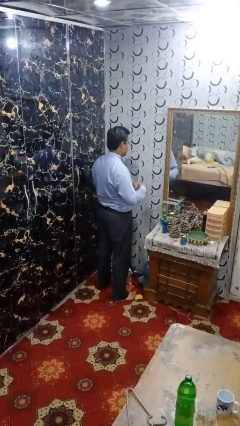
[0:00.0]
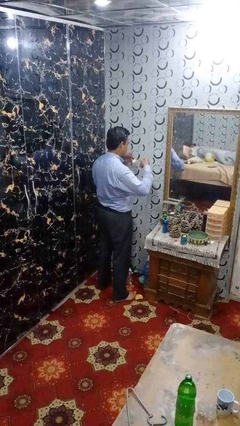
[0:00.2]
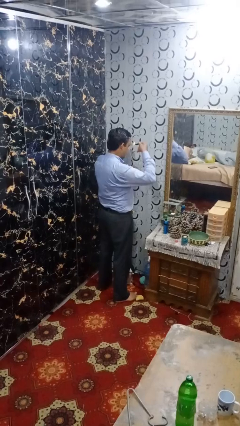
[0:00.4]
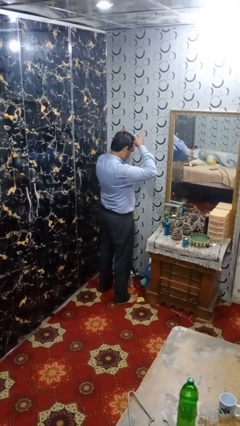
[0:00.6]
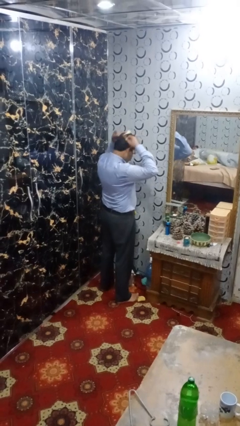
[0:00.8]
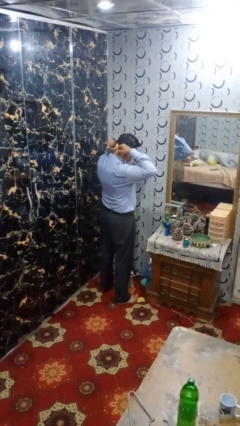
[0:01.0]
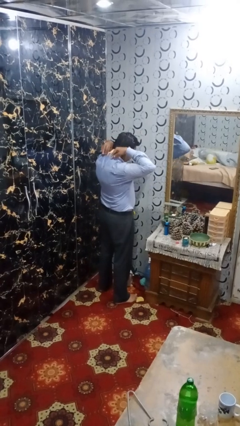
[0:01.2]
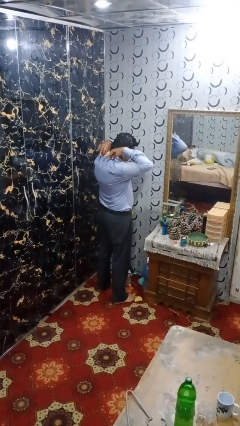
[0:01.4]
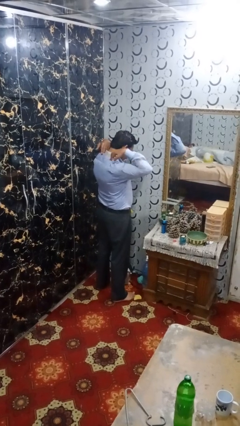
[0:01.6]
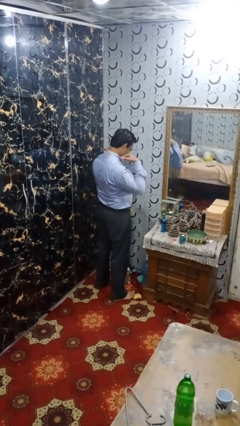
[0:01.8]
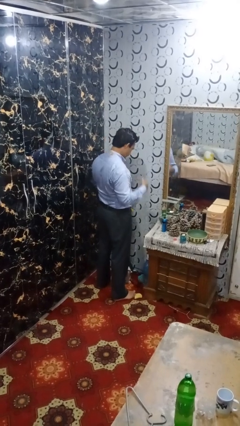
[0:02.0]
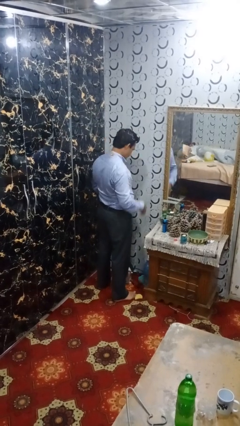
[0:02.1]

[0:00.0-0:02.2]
person puts on necklace

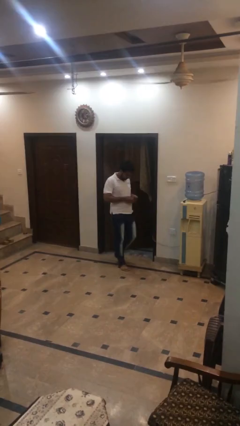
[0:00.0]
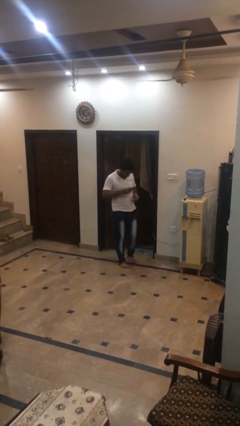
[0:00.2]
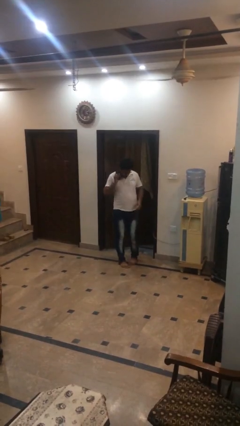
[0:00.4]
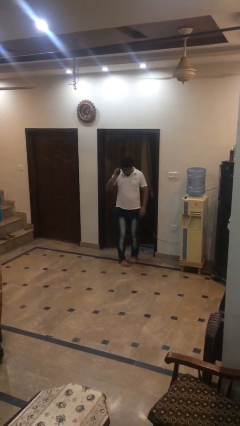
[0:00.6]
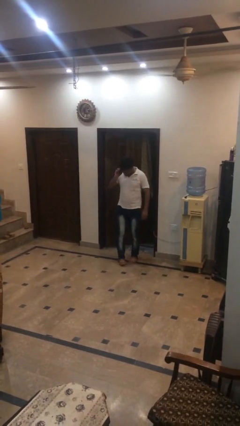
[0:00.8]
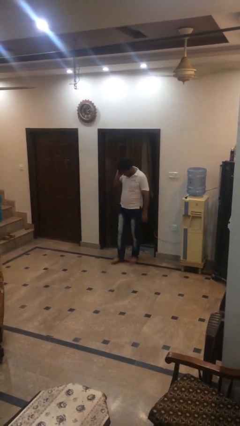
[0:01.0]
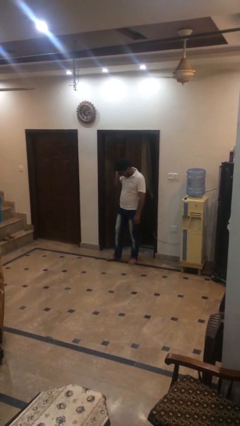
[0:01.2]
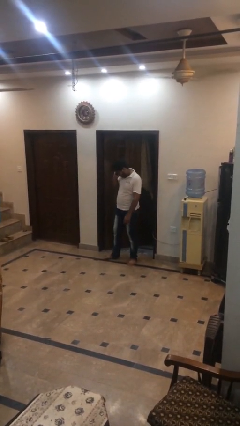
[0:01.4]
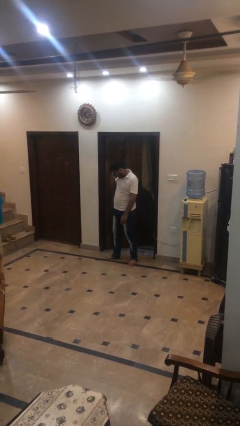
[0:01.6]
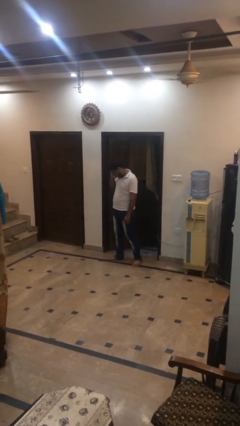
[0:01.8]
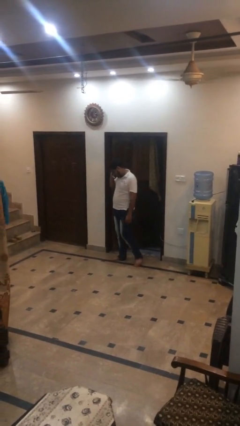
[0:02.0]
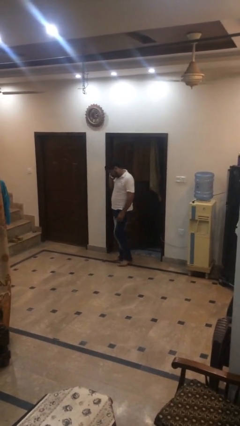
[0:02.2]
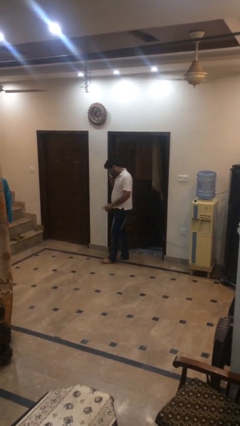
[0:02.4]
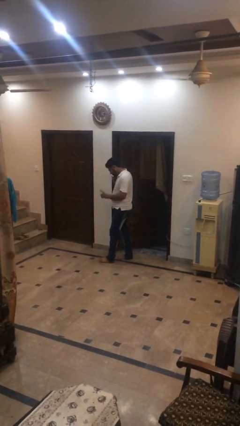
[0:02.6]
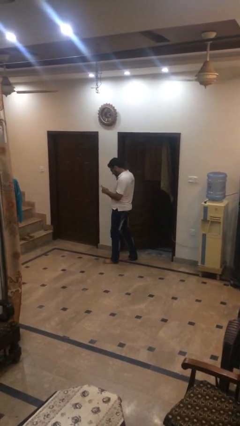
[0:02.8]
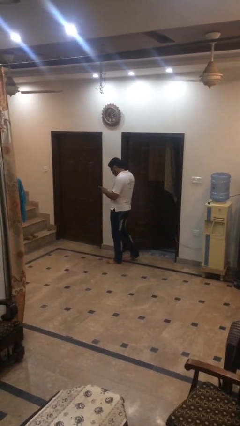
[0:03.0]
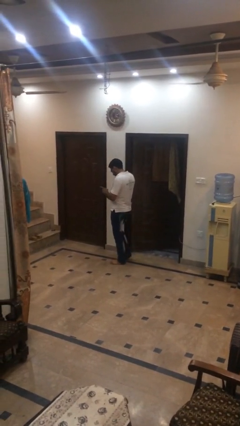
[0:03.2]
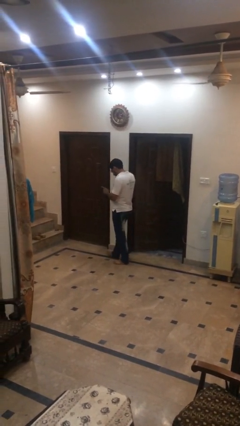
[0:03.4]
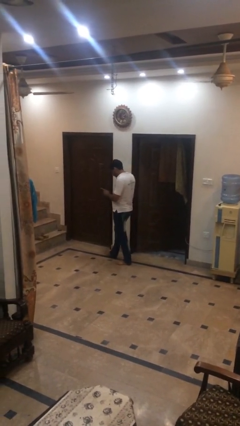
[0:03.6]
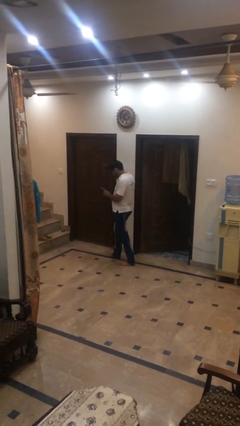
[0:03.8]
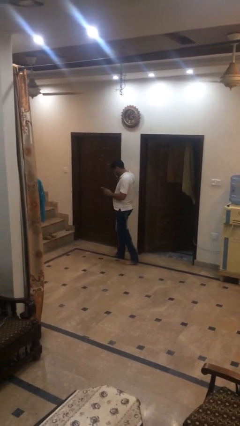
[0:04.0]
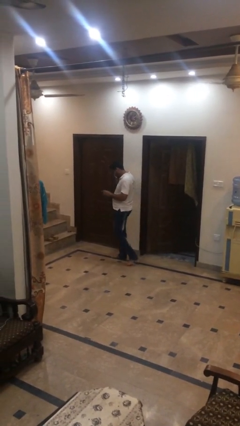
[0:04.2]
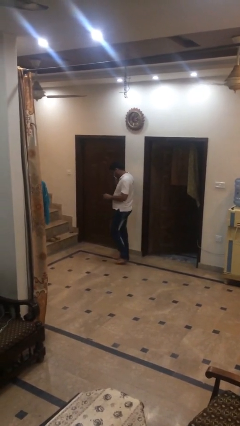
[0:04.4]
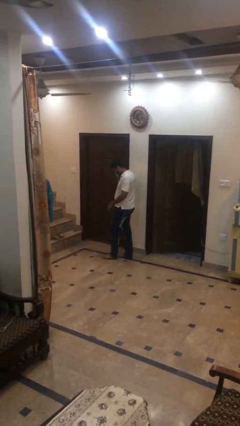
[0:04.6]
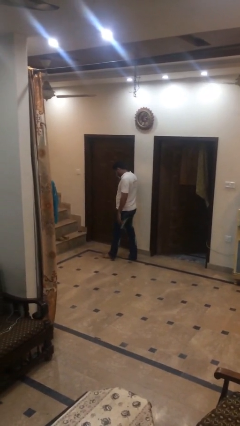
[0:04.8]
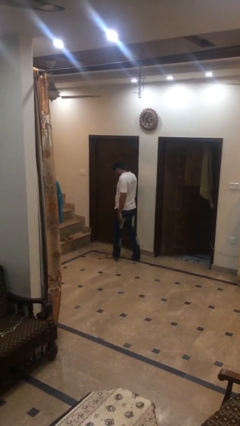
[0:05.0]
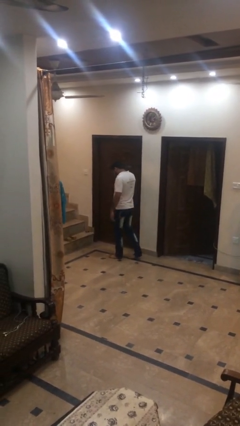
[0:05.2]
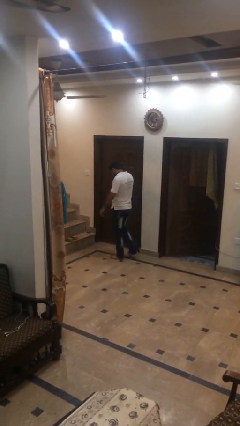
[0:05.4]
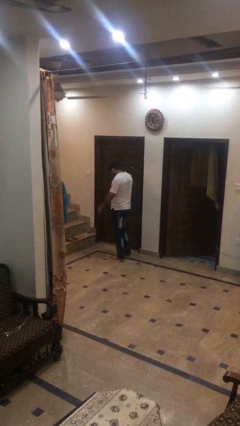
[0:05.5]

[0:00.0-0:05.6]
person talks on phone

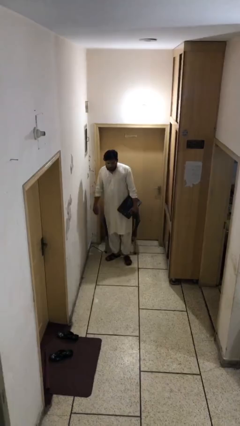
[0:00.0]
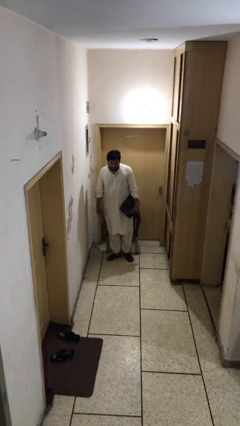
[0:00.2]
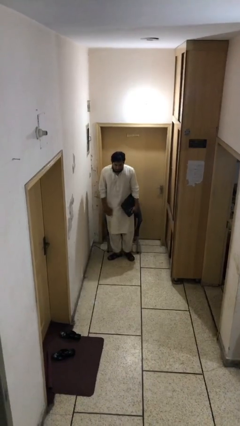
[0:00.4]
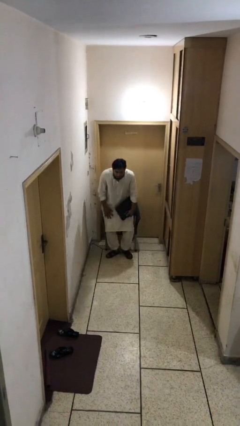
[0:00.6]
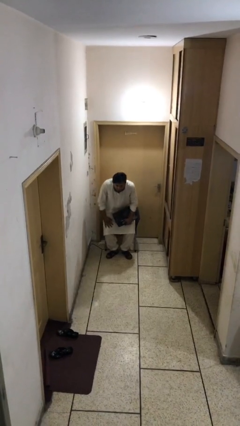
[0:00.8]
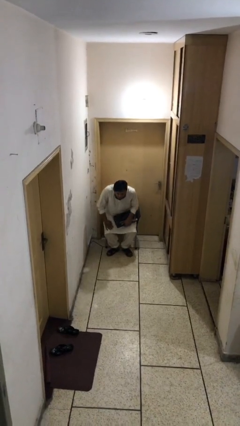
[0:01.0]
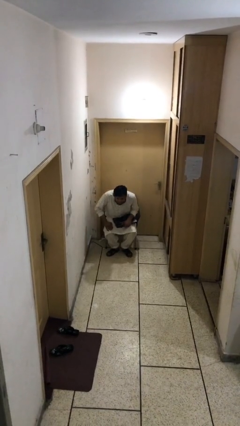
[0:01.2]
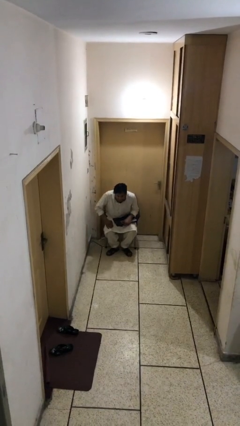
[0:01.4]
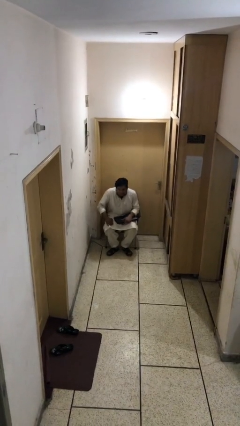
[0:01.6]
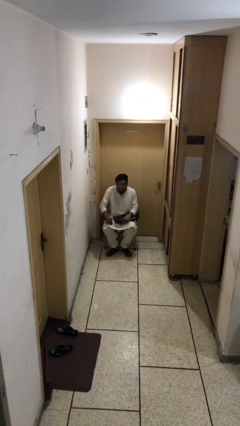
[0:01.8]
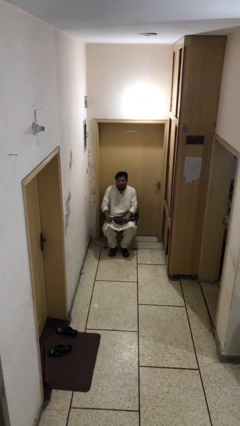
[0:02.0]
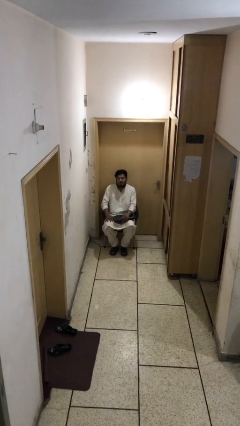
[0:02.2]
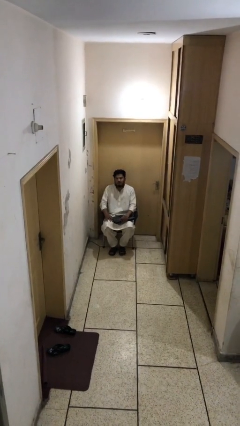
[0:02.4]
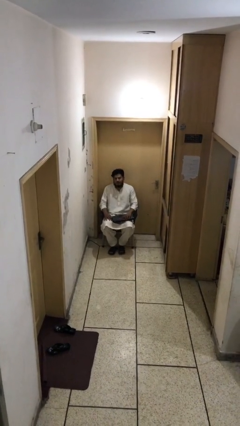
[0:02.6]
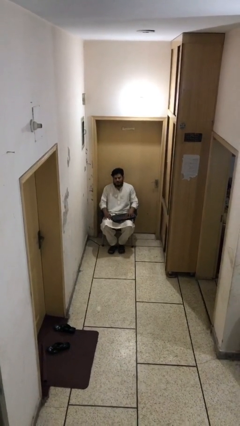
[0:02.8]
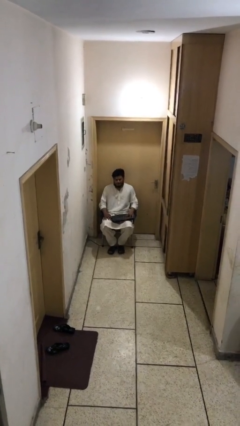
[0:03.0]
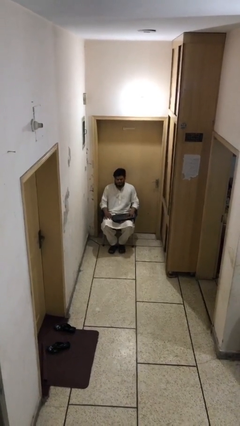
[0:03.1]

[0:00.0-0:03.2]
person sits down

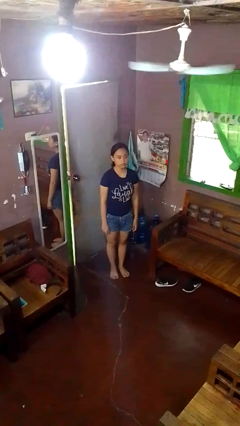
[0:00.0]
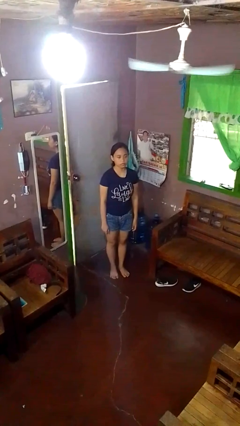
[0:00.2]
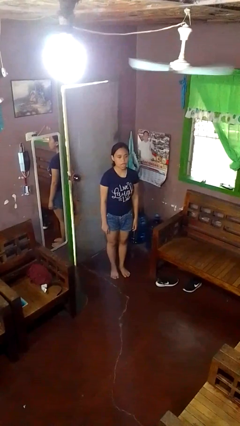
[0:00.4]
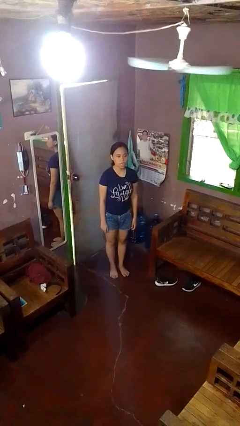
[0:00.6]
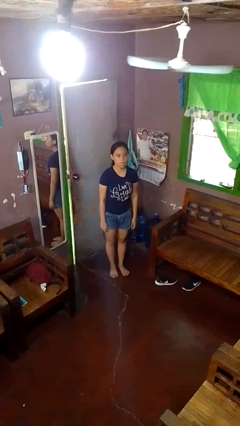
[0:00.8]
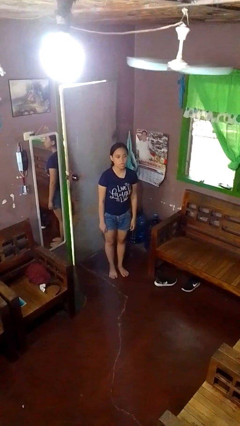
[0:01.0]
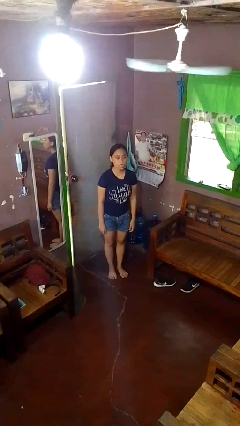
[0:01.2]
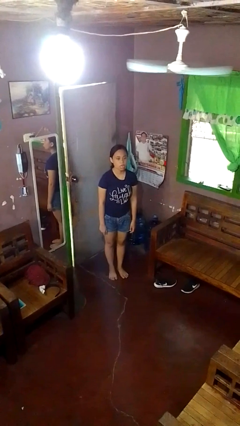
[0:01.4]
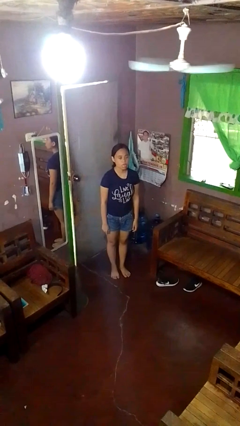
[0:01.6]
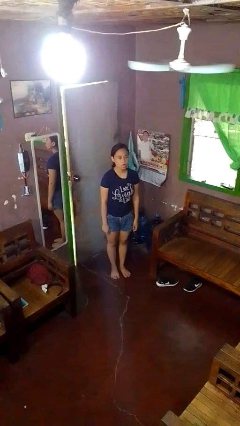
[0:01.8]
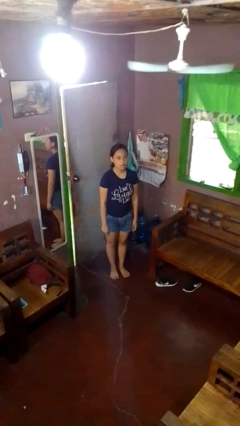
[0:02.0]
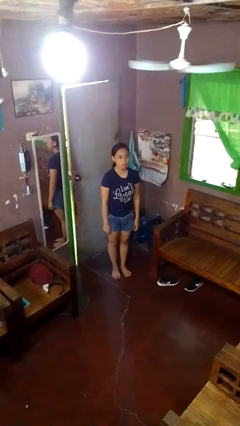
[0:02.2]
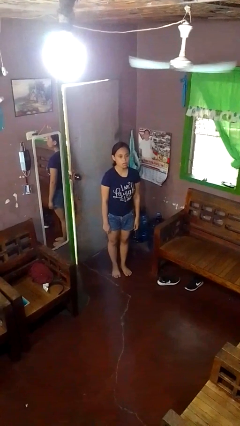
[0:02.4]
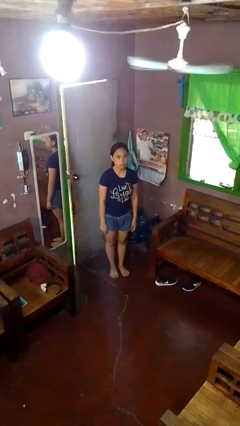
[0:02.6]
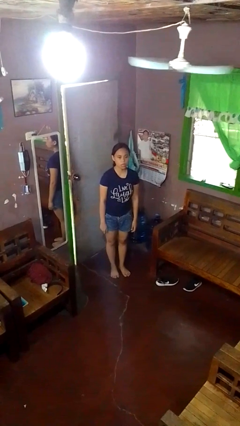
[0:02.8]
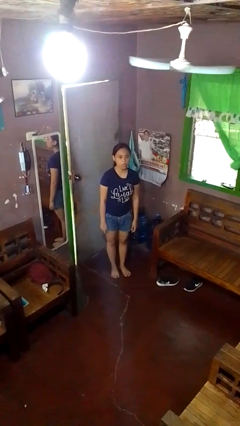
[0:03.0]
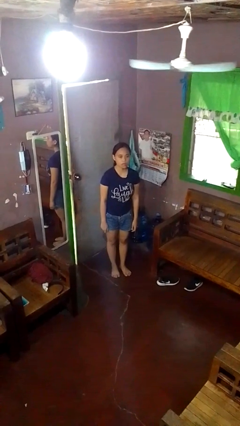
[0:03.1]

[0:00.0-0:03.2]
person sticks out tongue

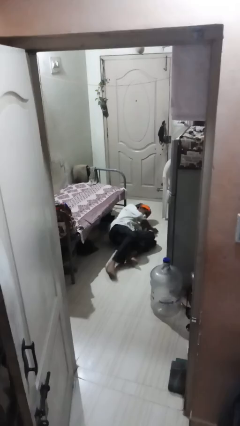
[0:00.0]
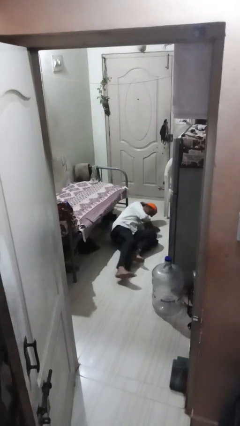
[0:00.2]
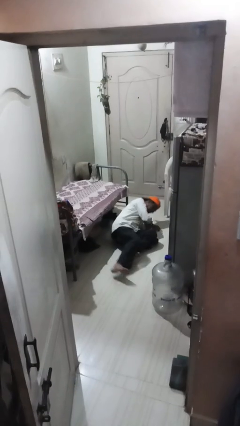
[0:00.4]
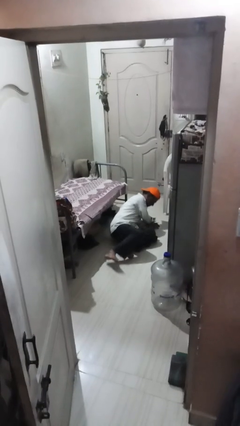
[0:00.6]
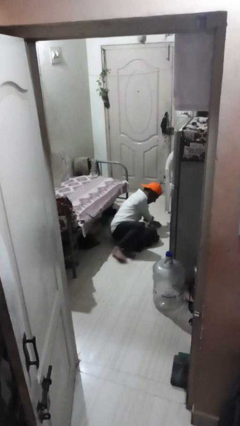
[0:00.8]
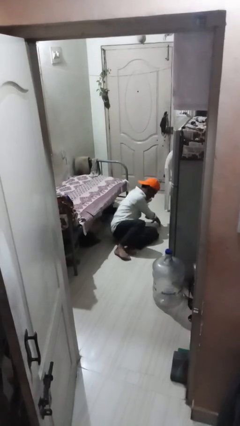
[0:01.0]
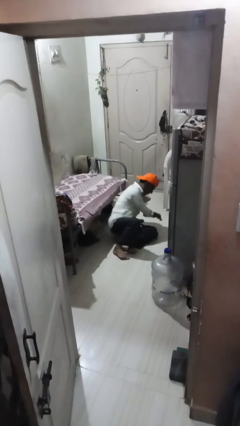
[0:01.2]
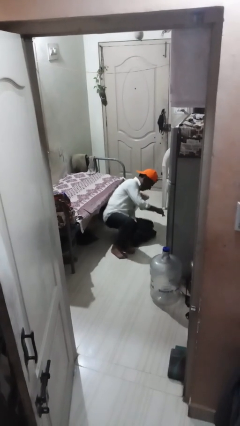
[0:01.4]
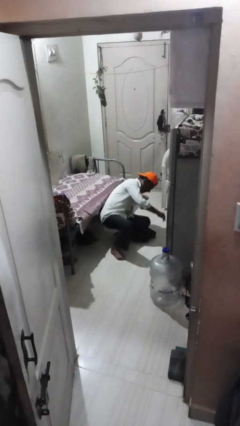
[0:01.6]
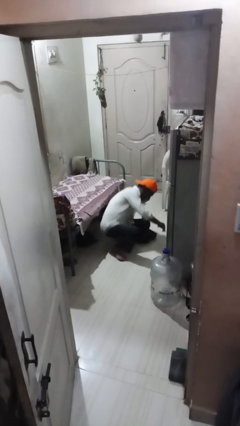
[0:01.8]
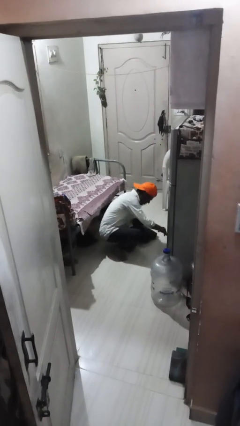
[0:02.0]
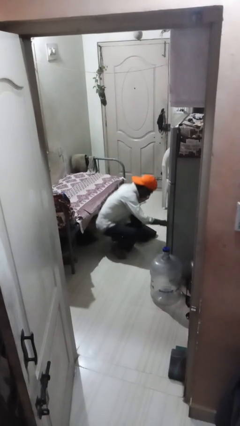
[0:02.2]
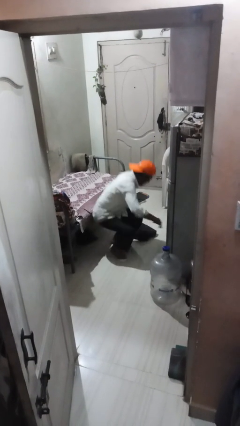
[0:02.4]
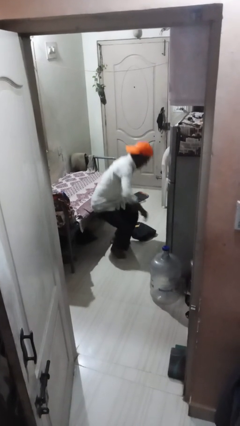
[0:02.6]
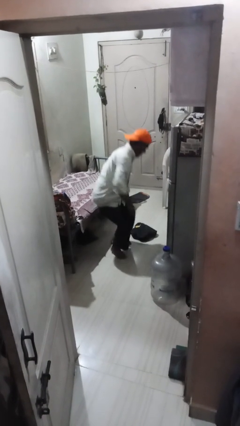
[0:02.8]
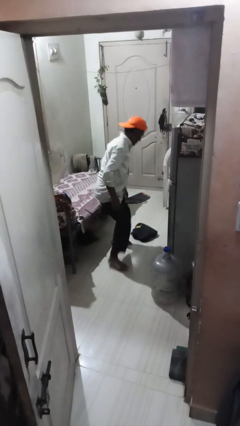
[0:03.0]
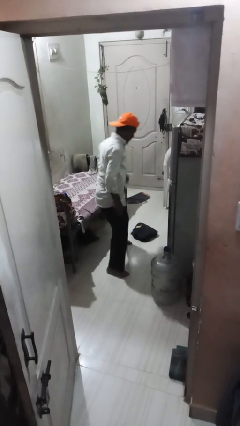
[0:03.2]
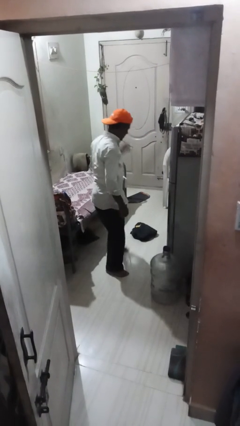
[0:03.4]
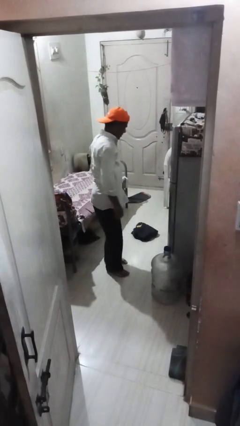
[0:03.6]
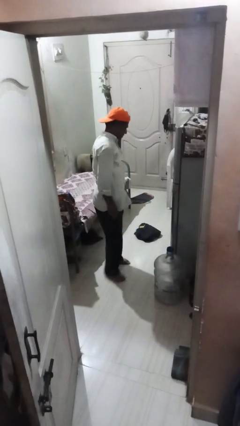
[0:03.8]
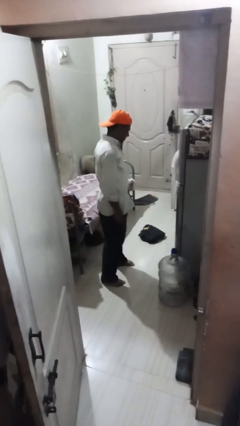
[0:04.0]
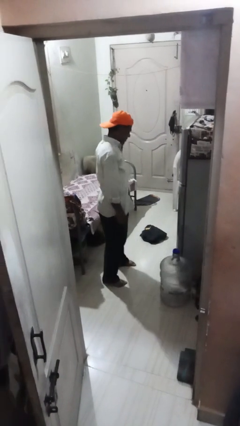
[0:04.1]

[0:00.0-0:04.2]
person stands up from floor
